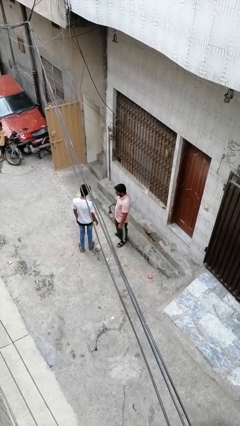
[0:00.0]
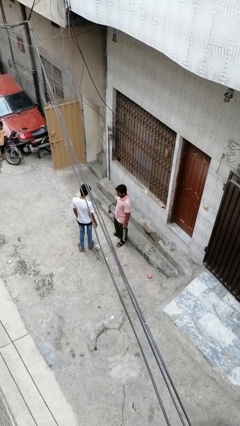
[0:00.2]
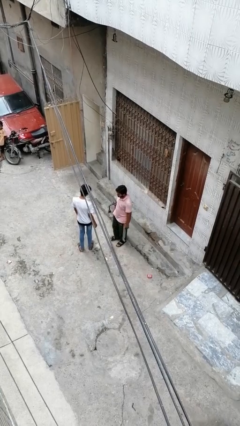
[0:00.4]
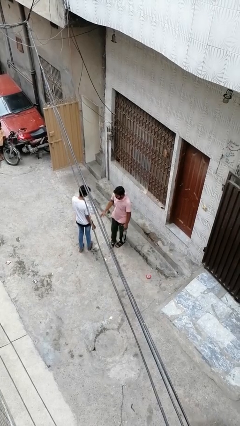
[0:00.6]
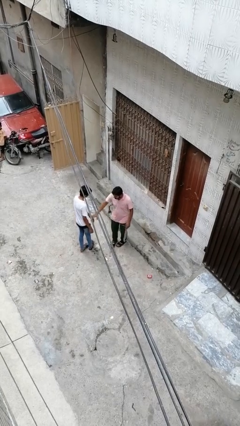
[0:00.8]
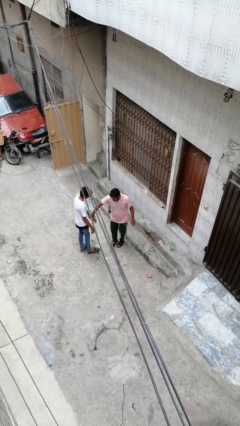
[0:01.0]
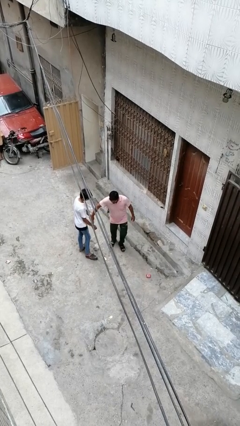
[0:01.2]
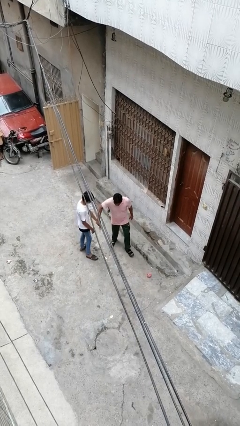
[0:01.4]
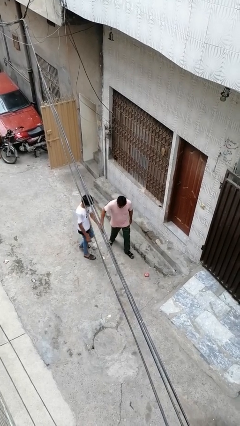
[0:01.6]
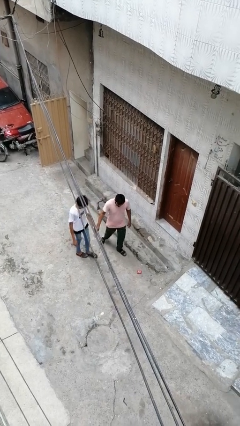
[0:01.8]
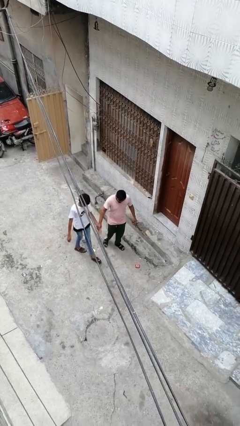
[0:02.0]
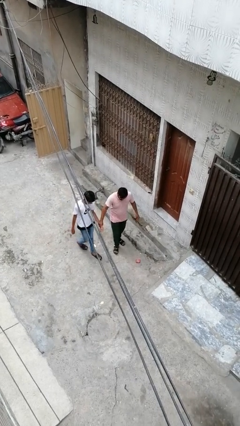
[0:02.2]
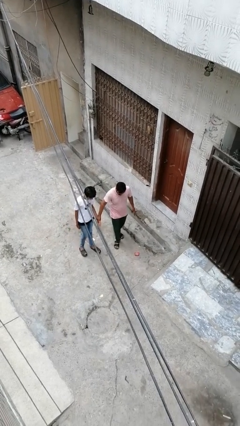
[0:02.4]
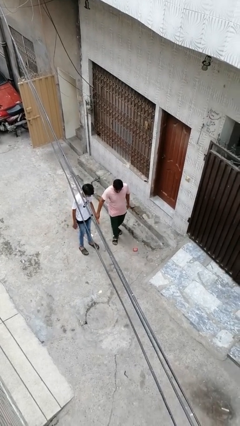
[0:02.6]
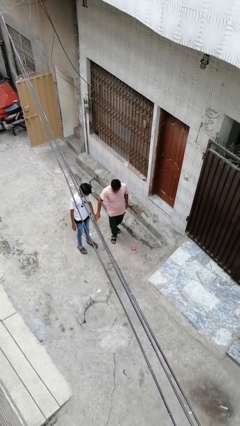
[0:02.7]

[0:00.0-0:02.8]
person grabs person by forearm

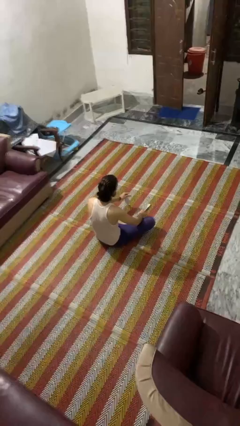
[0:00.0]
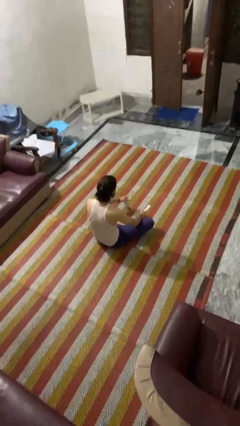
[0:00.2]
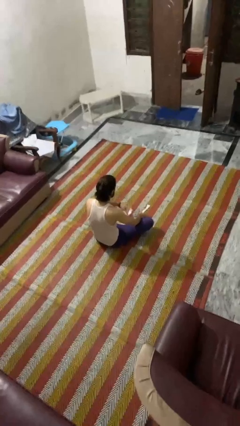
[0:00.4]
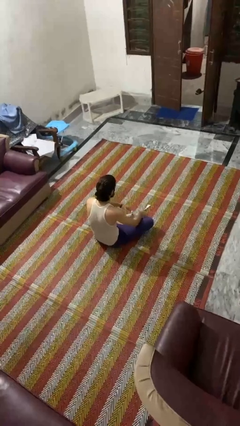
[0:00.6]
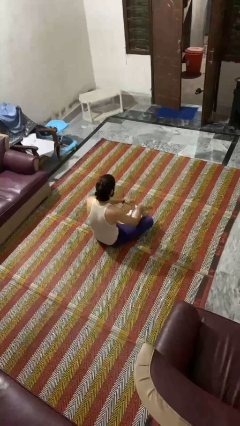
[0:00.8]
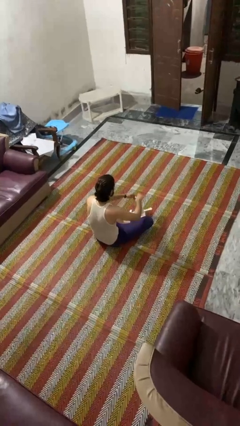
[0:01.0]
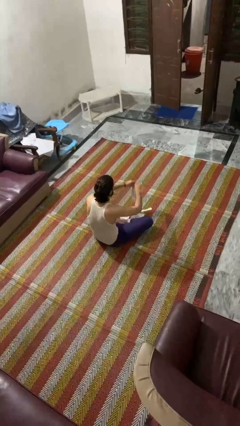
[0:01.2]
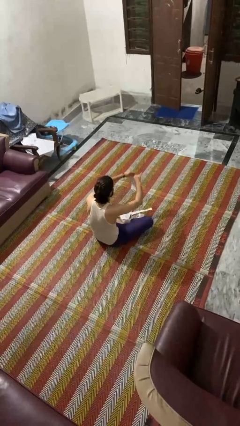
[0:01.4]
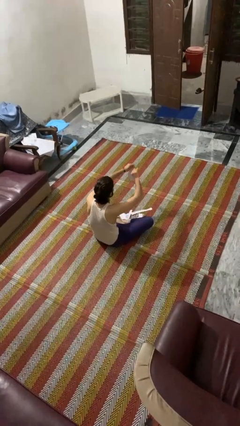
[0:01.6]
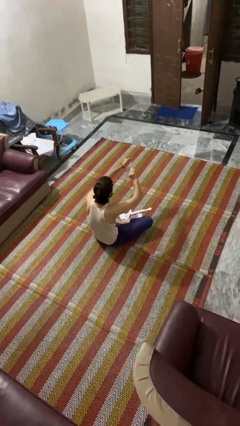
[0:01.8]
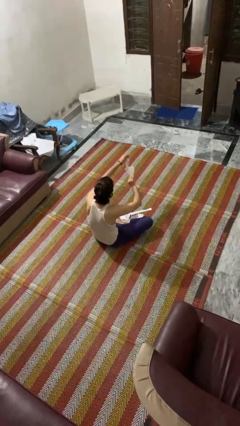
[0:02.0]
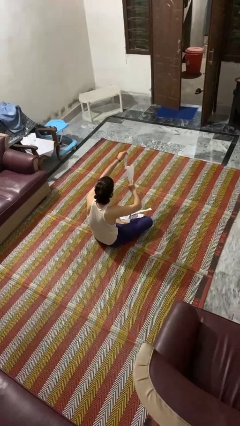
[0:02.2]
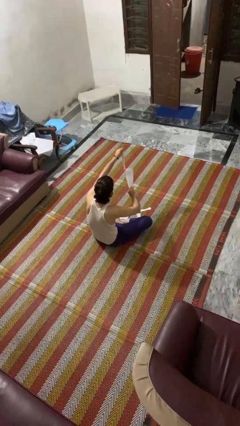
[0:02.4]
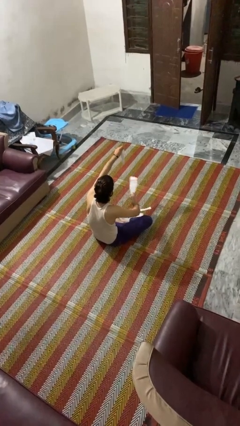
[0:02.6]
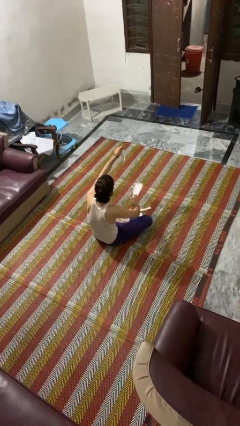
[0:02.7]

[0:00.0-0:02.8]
person tears paper

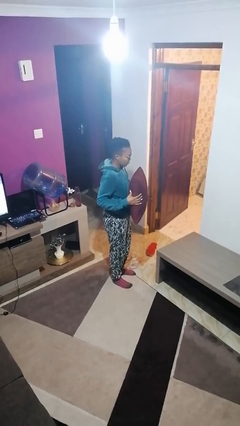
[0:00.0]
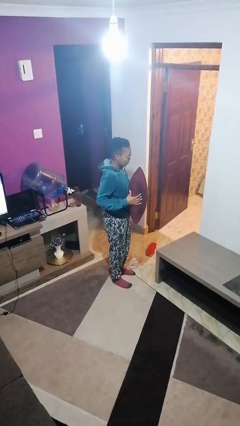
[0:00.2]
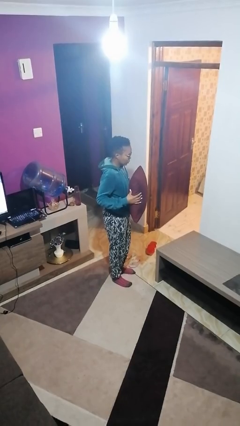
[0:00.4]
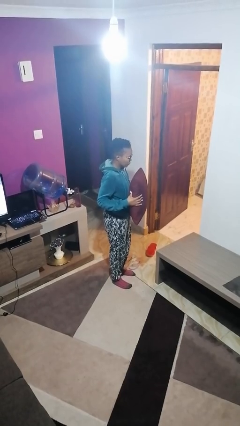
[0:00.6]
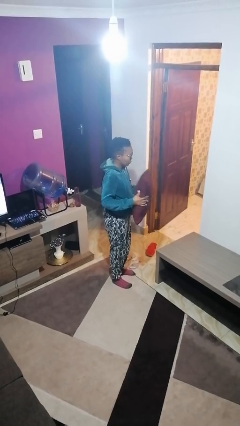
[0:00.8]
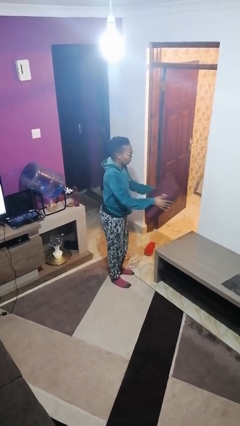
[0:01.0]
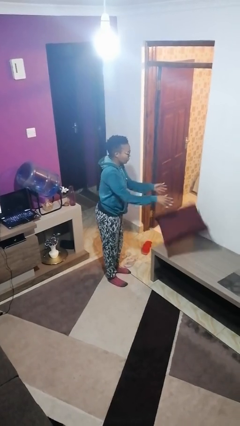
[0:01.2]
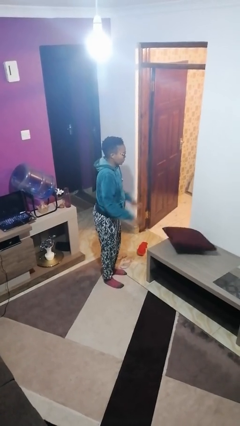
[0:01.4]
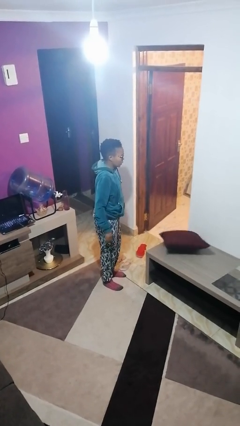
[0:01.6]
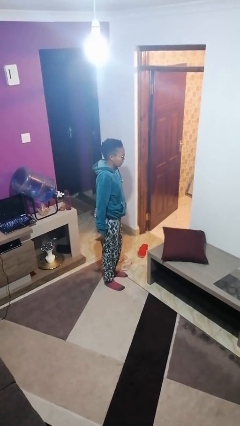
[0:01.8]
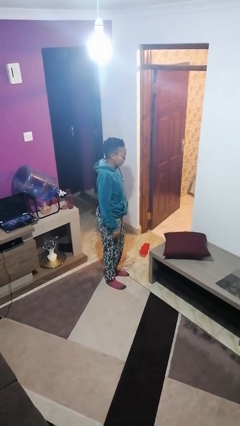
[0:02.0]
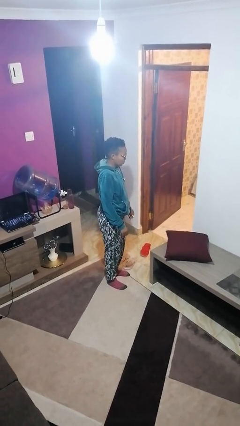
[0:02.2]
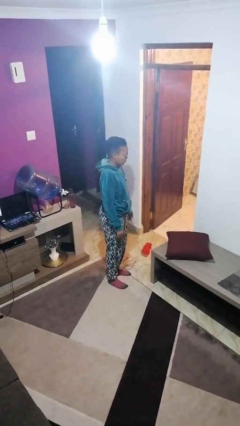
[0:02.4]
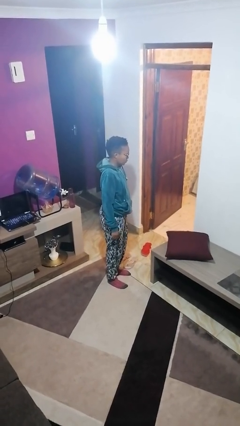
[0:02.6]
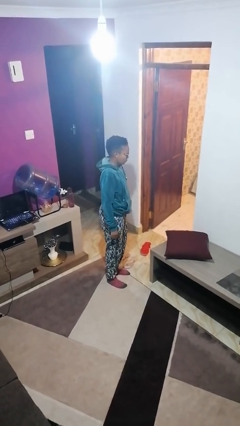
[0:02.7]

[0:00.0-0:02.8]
person throws object on table

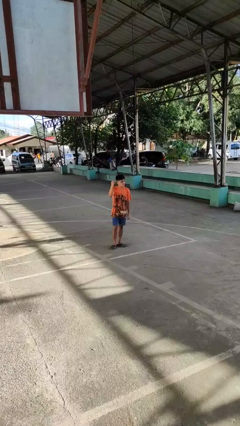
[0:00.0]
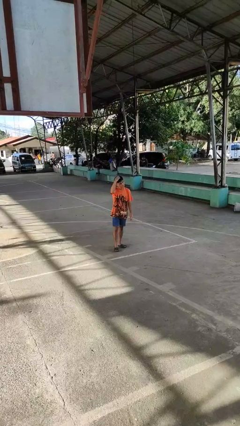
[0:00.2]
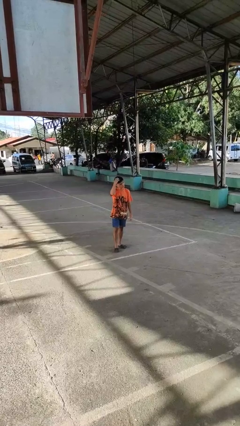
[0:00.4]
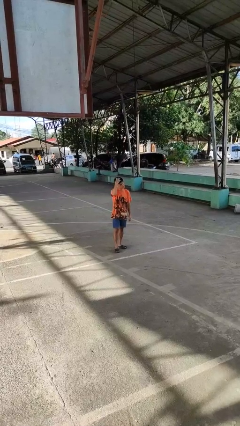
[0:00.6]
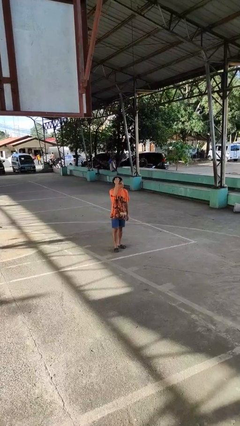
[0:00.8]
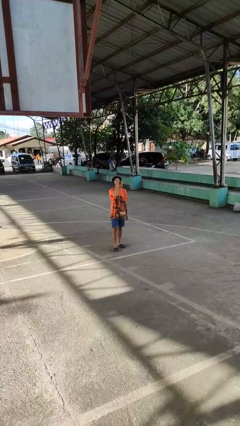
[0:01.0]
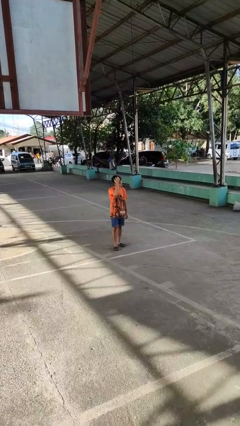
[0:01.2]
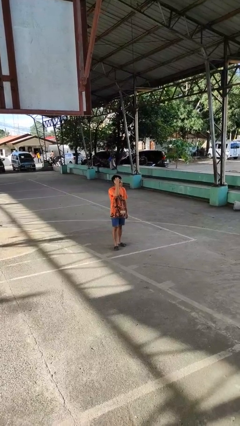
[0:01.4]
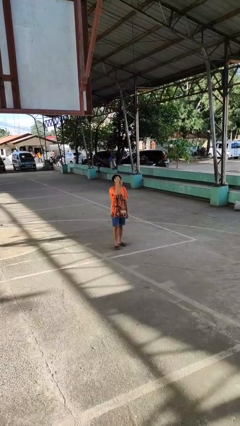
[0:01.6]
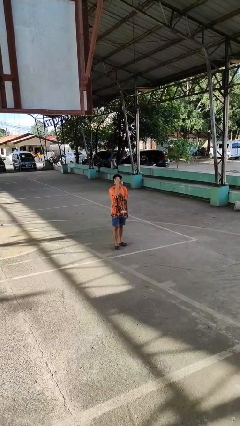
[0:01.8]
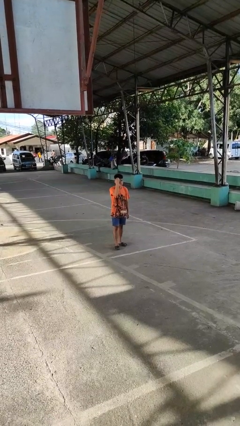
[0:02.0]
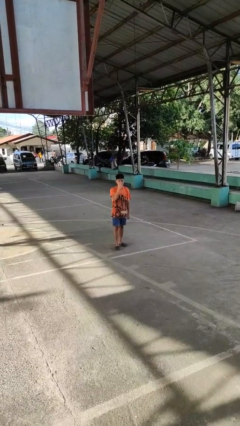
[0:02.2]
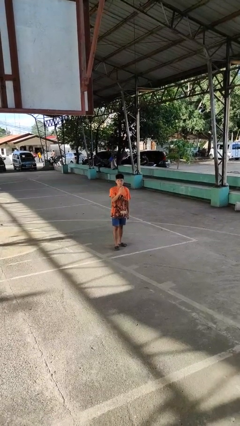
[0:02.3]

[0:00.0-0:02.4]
person scratches face

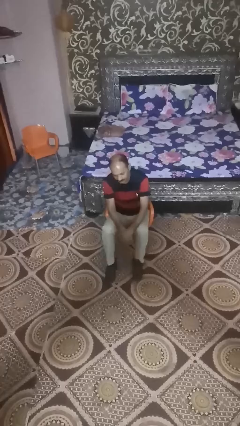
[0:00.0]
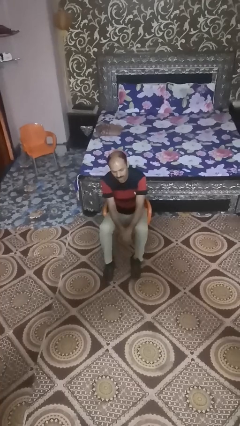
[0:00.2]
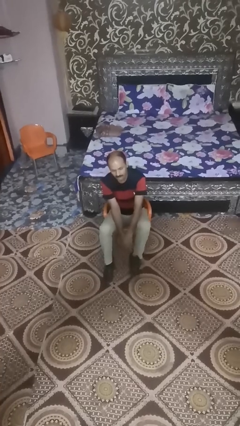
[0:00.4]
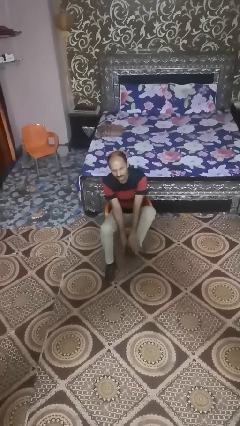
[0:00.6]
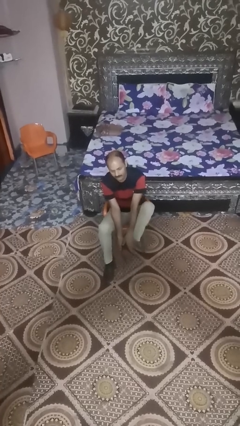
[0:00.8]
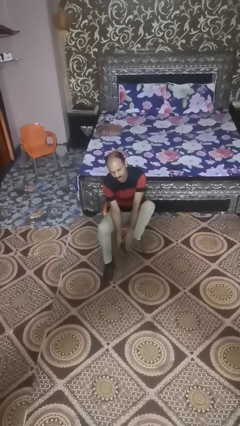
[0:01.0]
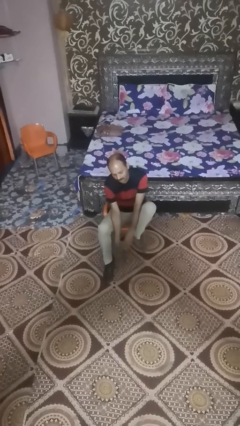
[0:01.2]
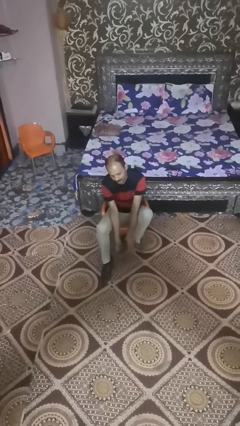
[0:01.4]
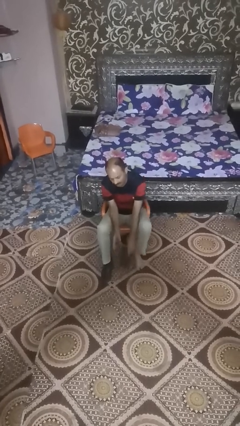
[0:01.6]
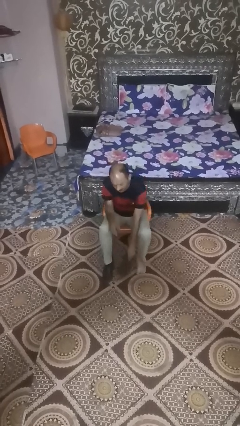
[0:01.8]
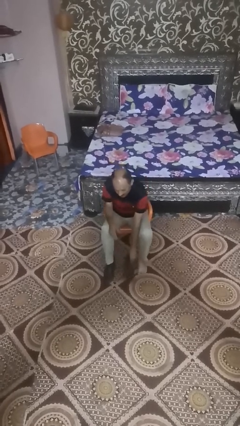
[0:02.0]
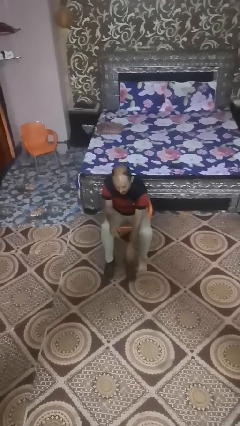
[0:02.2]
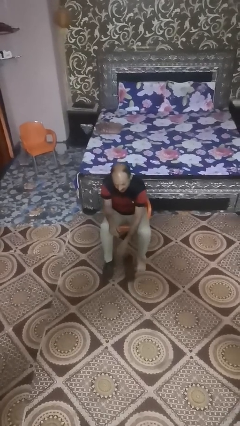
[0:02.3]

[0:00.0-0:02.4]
person takes off boots

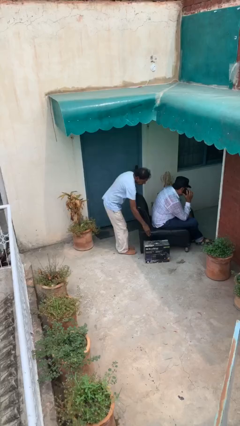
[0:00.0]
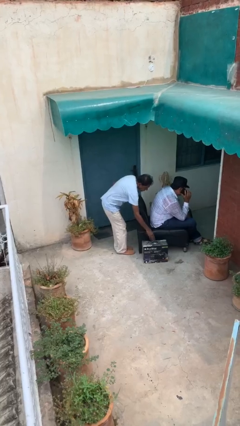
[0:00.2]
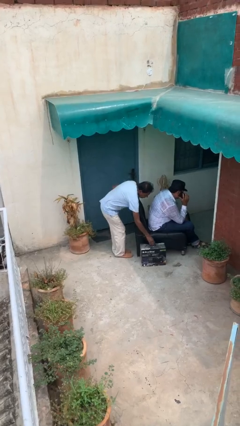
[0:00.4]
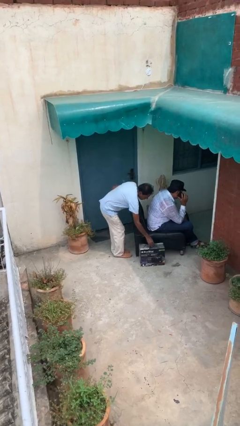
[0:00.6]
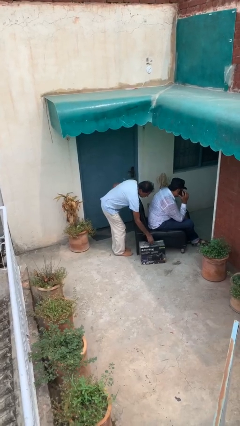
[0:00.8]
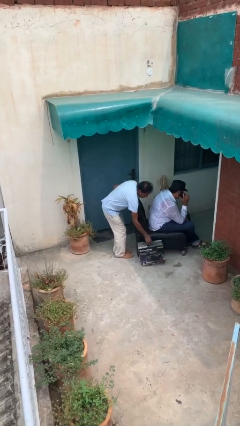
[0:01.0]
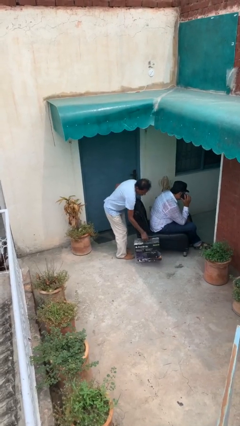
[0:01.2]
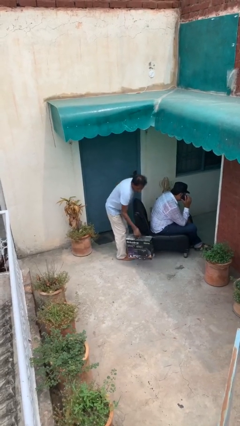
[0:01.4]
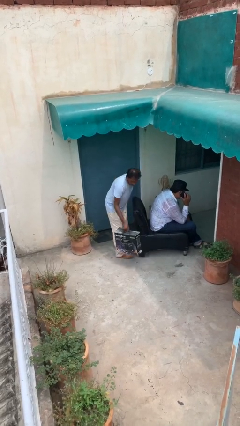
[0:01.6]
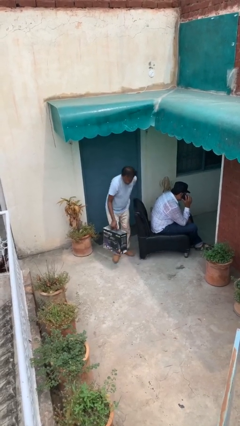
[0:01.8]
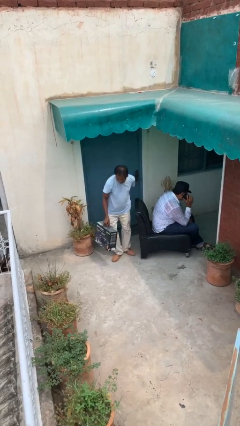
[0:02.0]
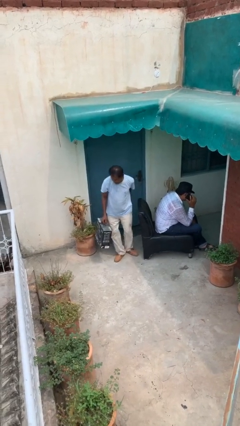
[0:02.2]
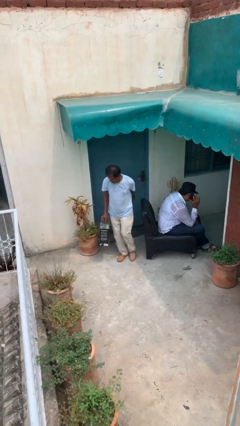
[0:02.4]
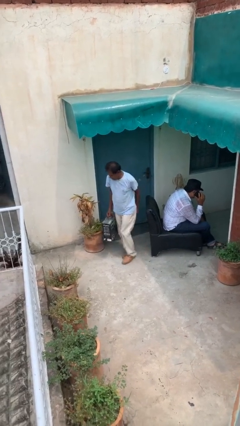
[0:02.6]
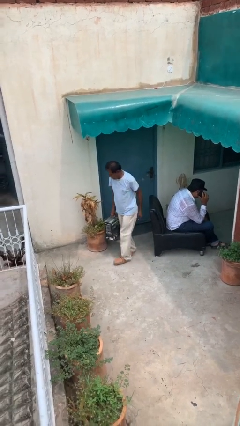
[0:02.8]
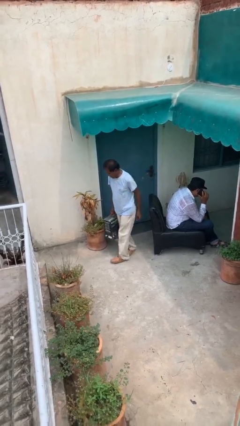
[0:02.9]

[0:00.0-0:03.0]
person steals object from person

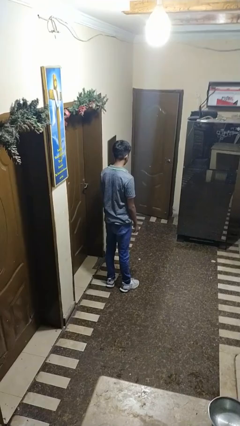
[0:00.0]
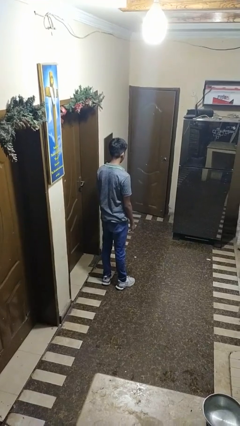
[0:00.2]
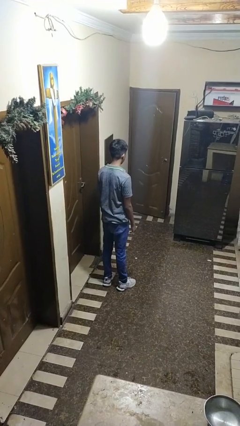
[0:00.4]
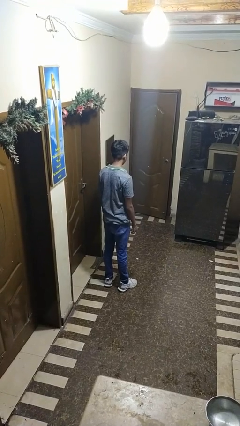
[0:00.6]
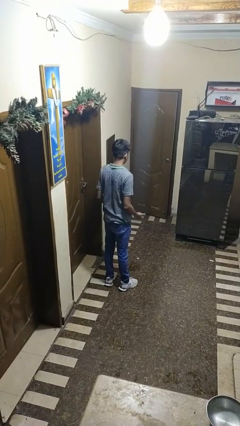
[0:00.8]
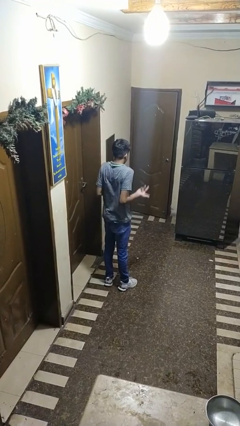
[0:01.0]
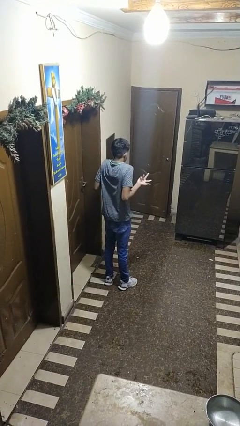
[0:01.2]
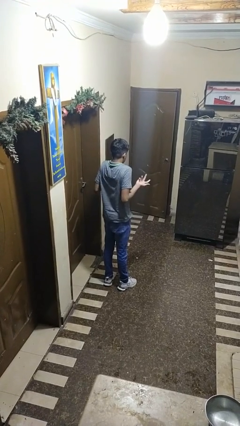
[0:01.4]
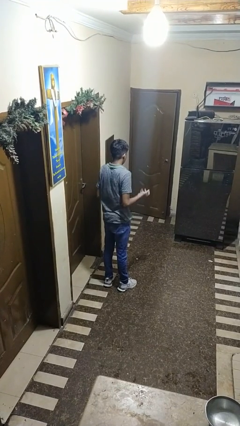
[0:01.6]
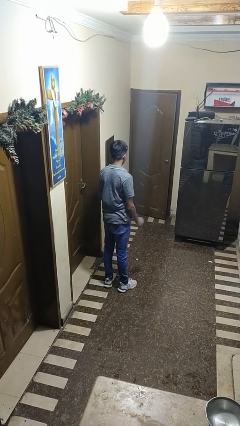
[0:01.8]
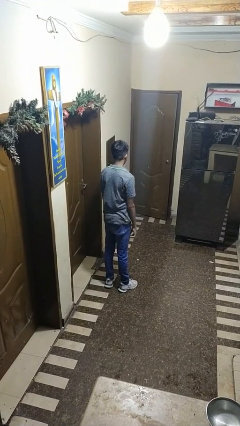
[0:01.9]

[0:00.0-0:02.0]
person shrugs
